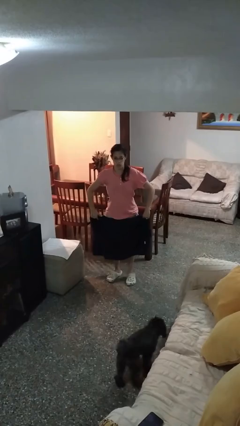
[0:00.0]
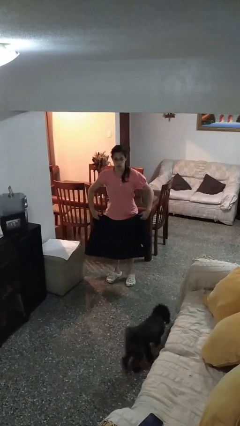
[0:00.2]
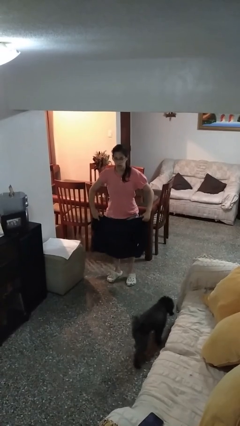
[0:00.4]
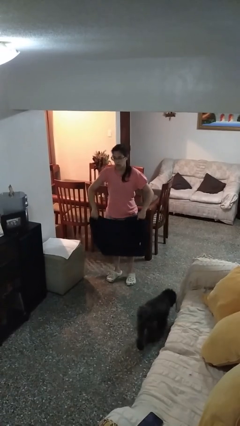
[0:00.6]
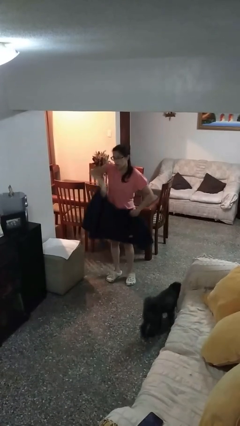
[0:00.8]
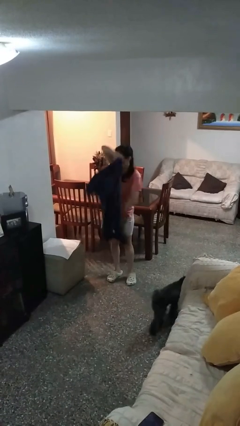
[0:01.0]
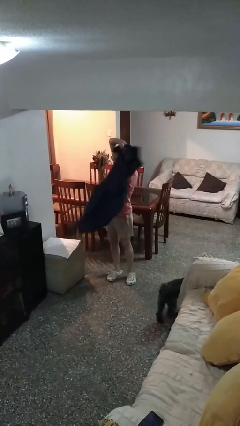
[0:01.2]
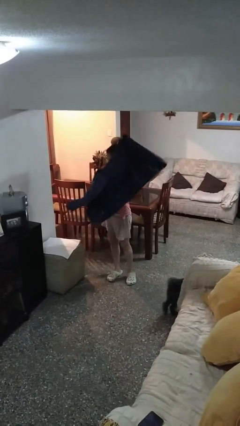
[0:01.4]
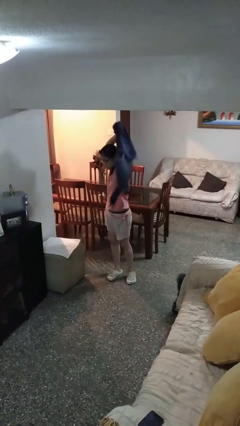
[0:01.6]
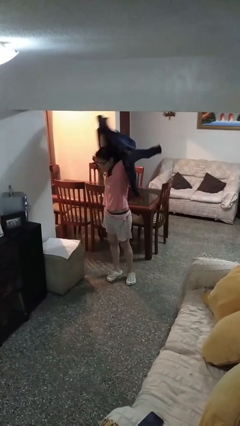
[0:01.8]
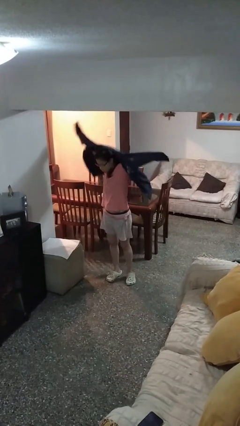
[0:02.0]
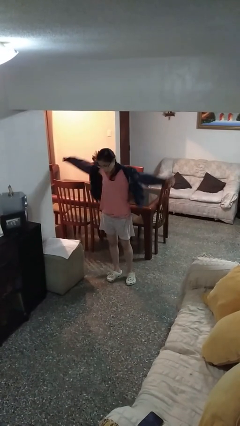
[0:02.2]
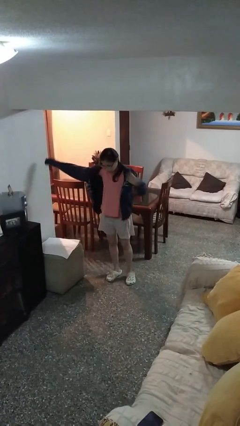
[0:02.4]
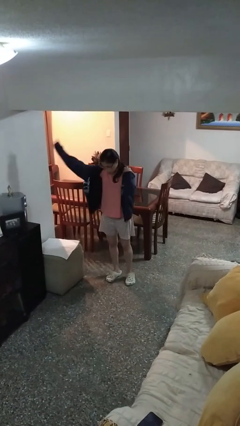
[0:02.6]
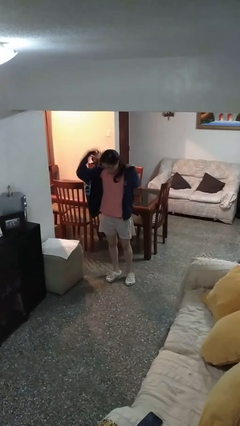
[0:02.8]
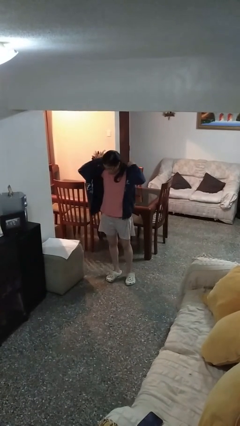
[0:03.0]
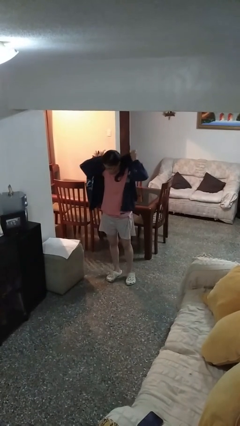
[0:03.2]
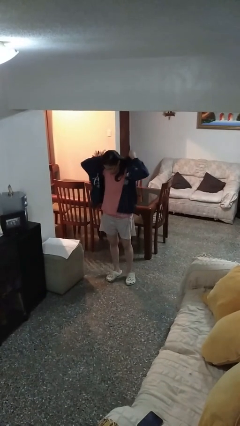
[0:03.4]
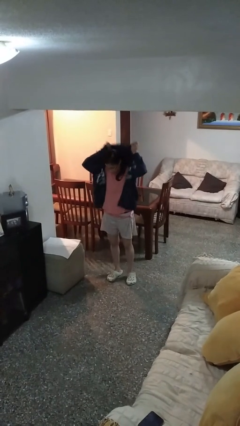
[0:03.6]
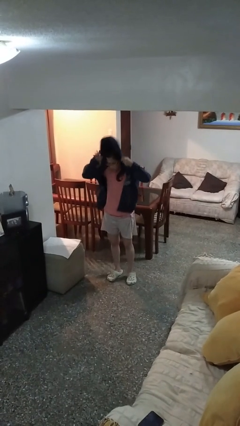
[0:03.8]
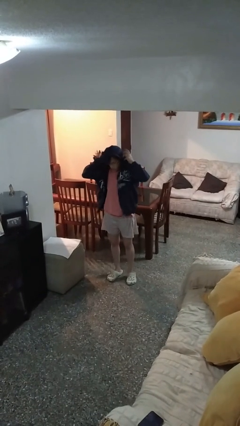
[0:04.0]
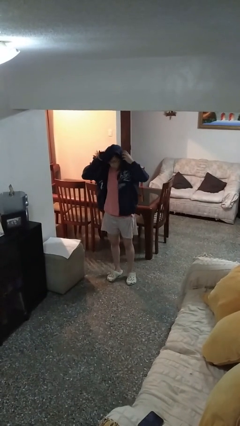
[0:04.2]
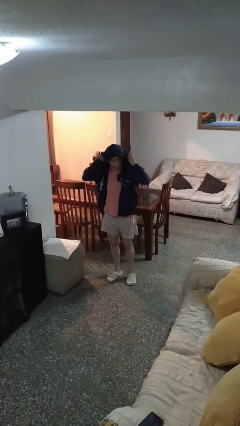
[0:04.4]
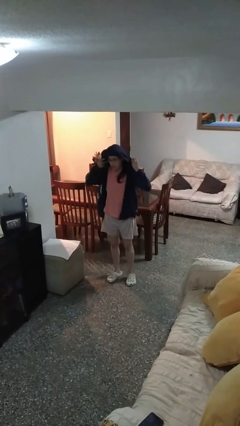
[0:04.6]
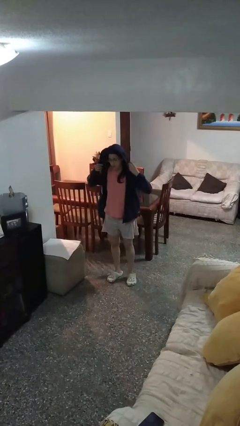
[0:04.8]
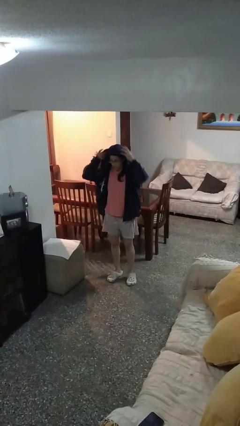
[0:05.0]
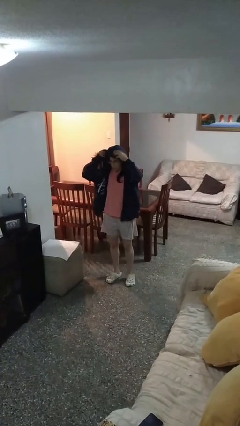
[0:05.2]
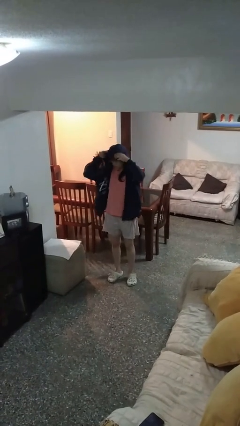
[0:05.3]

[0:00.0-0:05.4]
person puts on hoodie

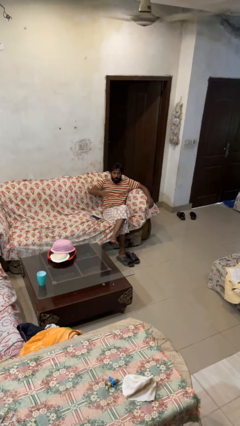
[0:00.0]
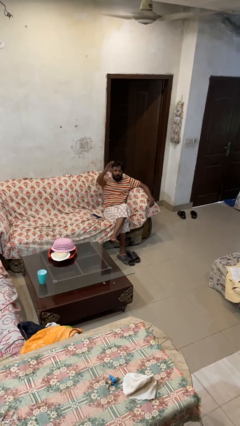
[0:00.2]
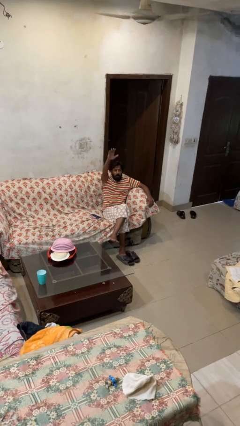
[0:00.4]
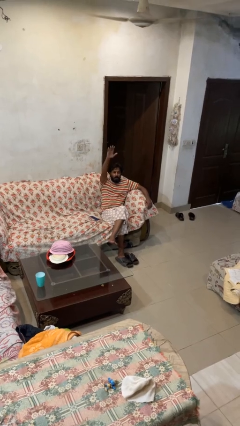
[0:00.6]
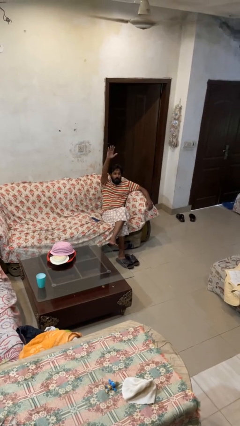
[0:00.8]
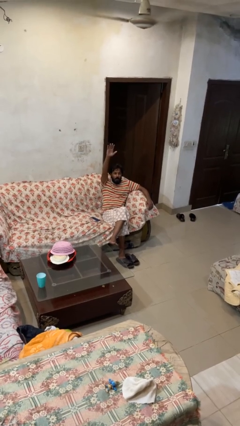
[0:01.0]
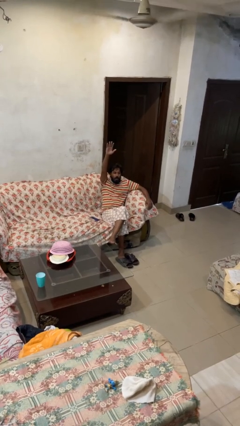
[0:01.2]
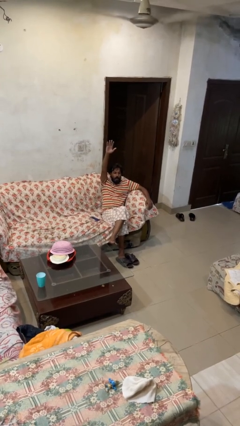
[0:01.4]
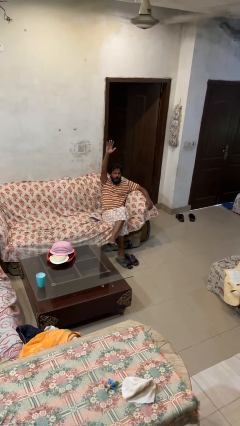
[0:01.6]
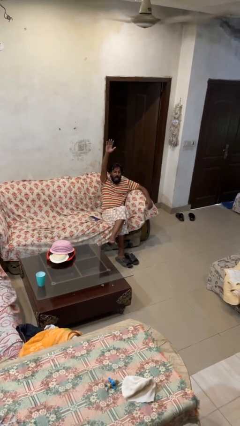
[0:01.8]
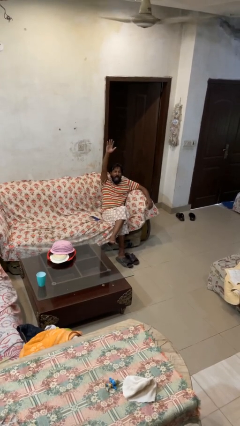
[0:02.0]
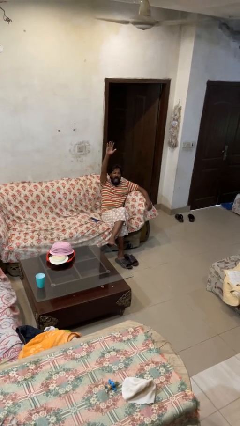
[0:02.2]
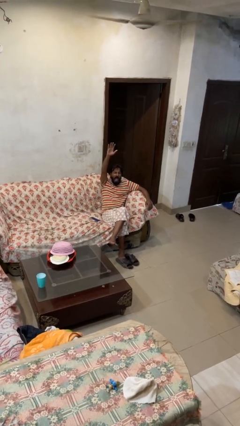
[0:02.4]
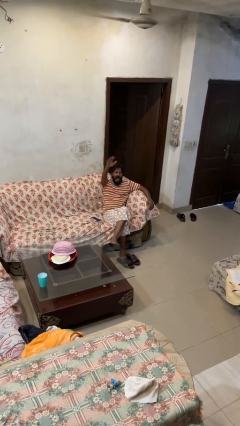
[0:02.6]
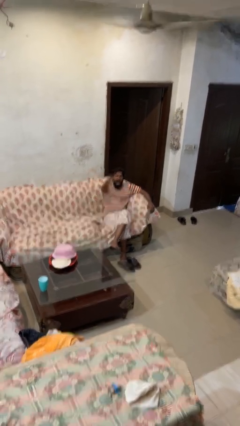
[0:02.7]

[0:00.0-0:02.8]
person gestures raise hand

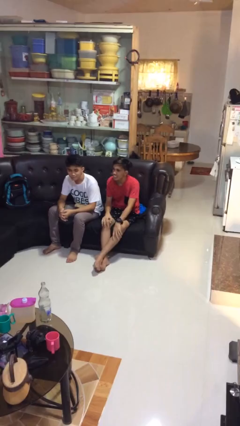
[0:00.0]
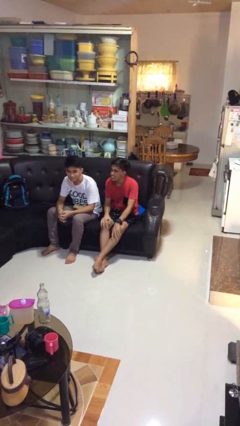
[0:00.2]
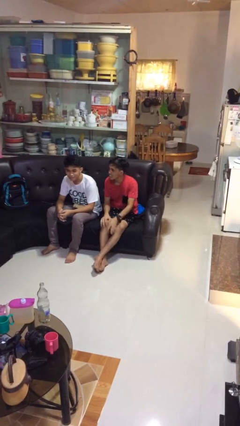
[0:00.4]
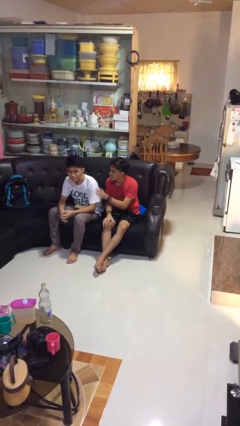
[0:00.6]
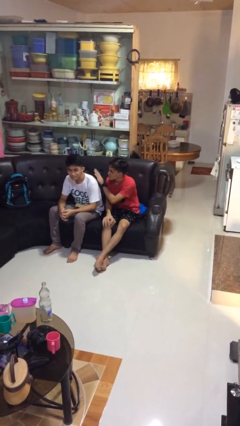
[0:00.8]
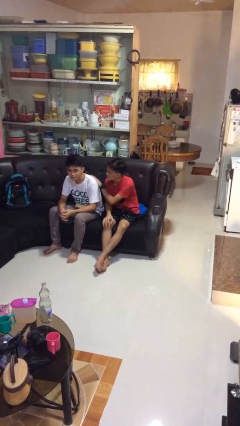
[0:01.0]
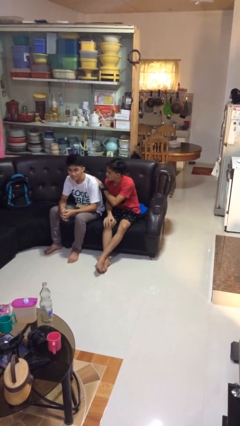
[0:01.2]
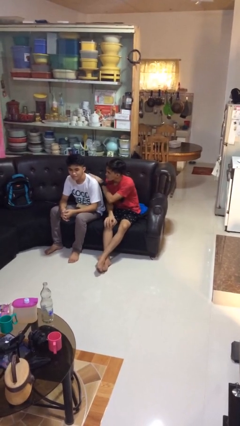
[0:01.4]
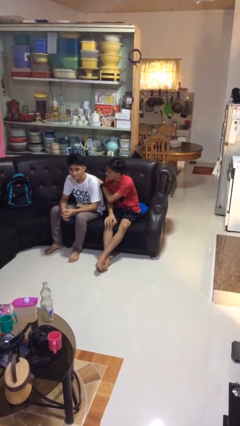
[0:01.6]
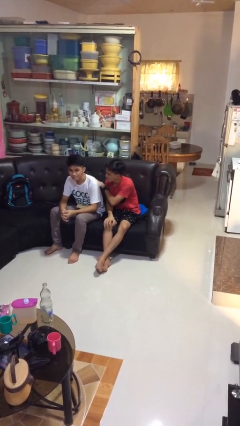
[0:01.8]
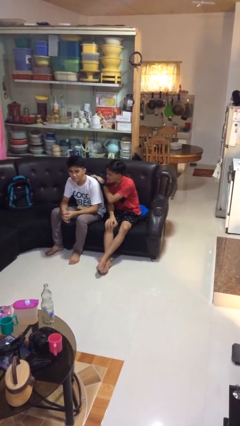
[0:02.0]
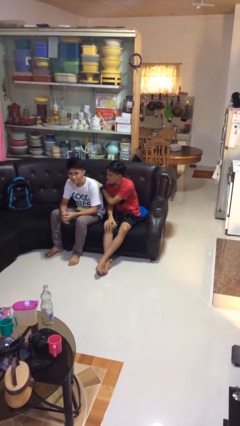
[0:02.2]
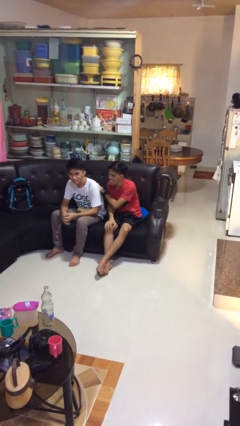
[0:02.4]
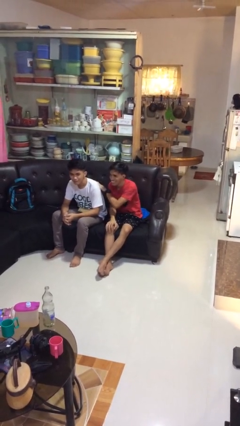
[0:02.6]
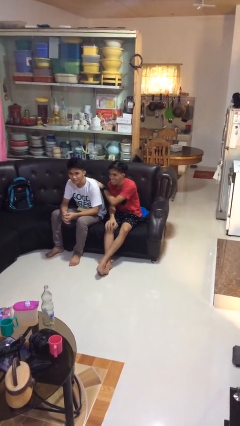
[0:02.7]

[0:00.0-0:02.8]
person touches back of person

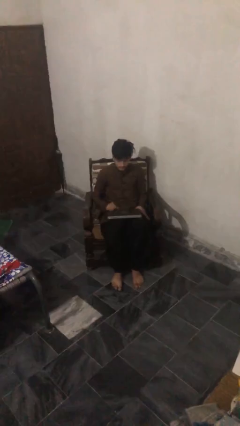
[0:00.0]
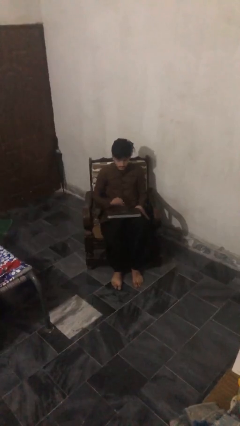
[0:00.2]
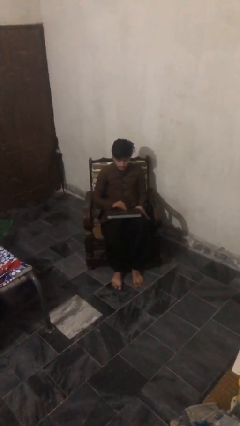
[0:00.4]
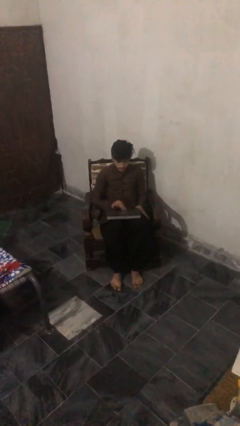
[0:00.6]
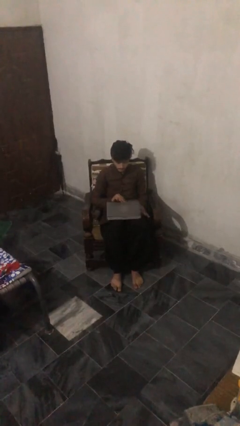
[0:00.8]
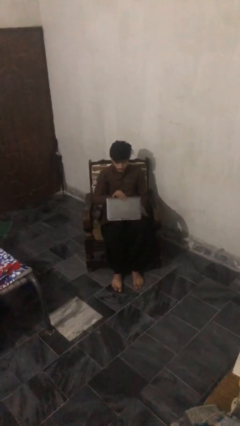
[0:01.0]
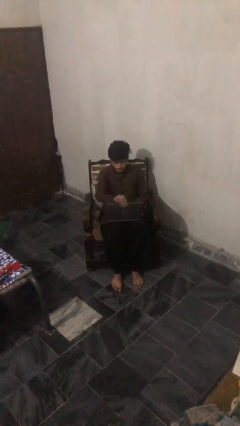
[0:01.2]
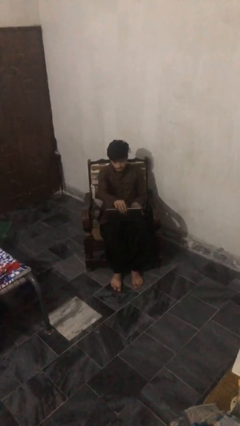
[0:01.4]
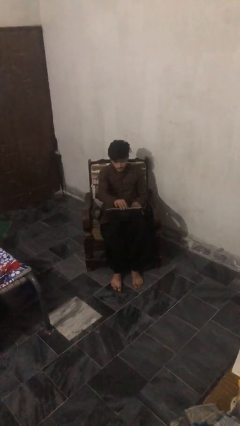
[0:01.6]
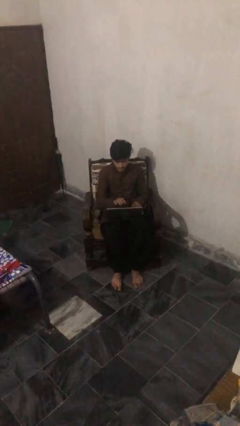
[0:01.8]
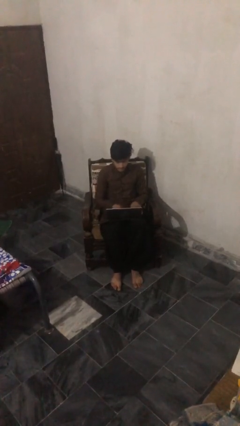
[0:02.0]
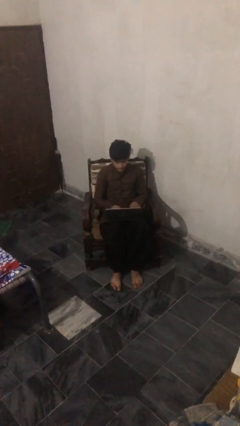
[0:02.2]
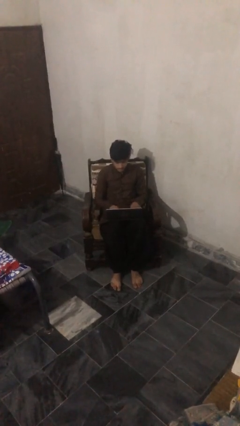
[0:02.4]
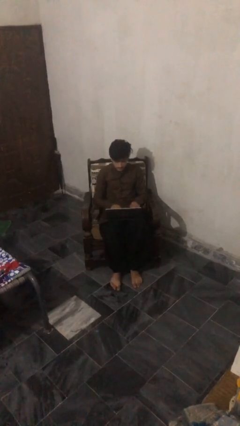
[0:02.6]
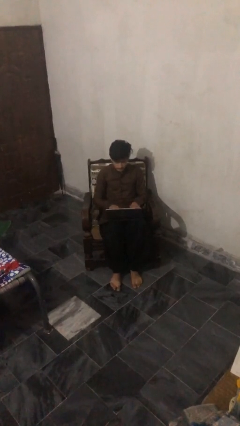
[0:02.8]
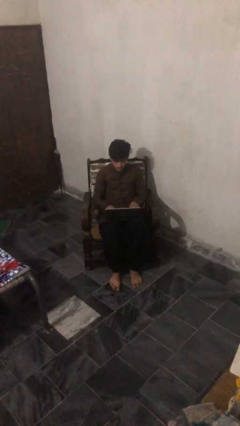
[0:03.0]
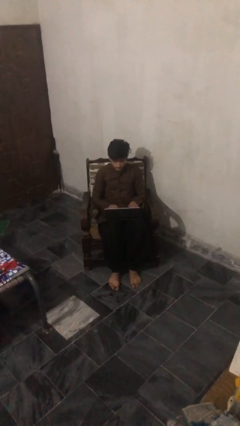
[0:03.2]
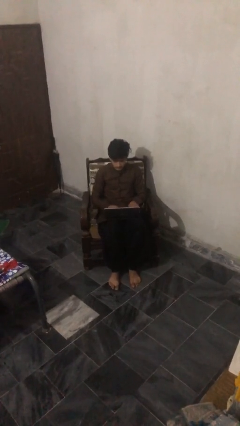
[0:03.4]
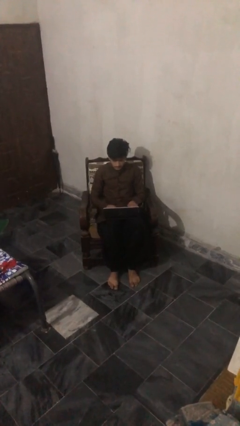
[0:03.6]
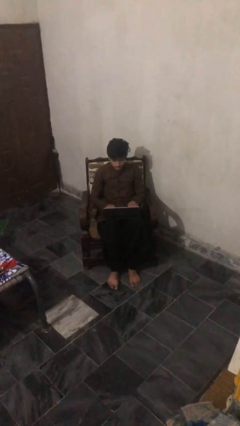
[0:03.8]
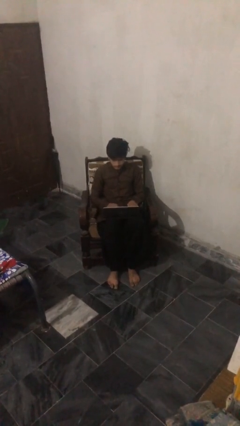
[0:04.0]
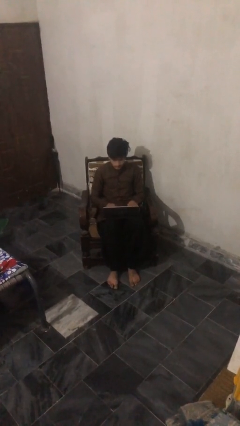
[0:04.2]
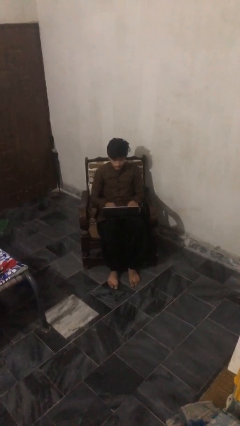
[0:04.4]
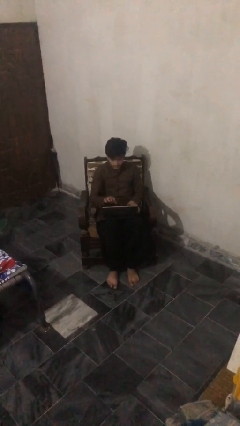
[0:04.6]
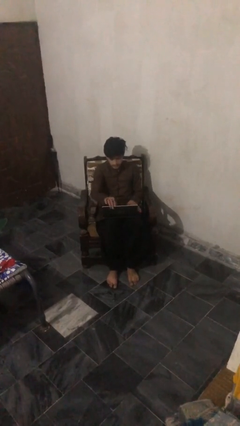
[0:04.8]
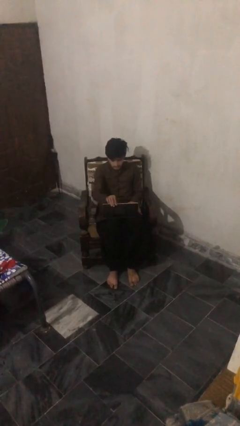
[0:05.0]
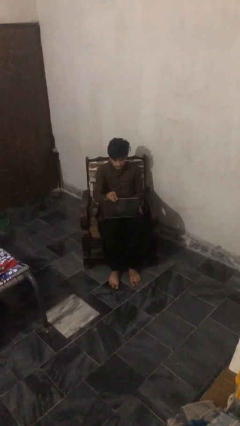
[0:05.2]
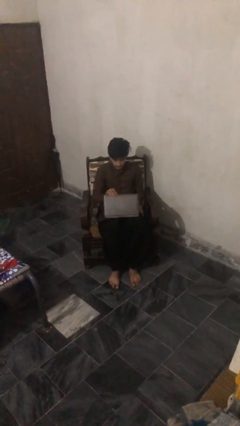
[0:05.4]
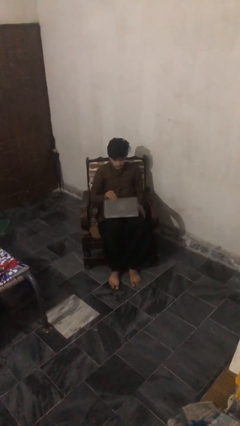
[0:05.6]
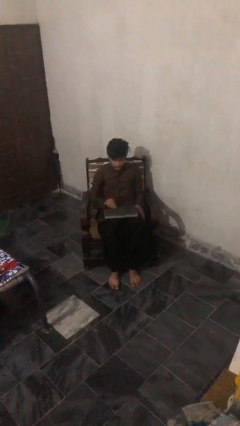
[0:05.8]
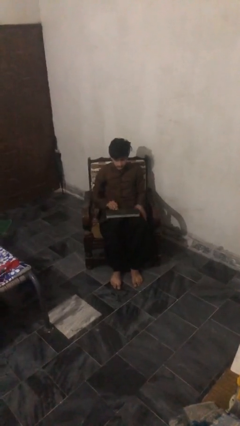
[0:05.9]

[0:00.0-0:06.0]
person interacts with laptop

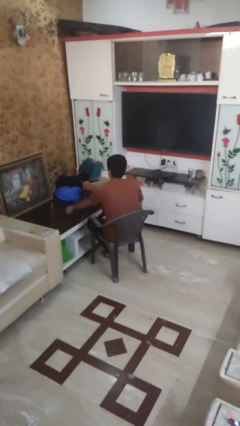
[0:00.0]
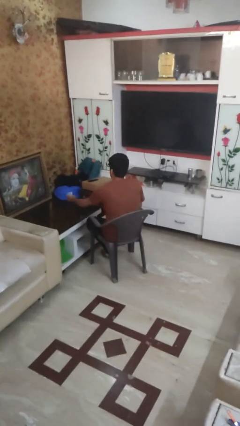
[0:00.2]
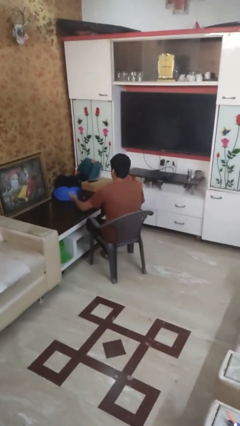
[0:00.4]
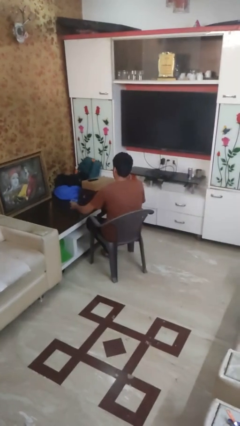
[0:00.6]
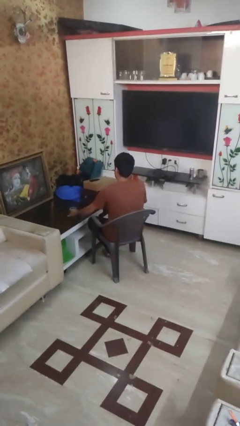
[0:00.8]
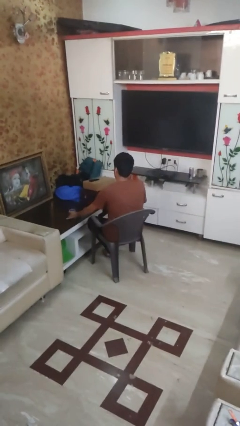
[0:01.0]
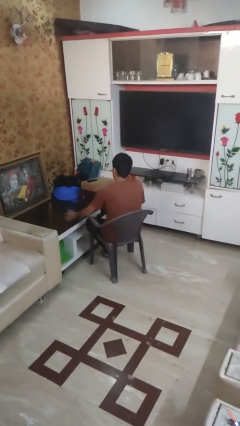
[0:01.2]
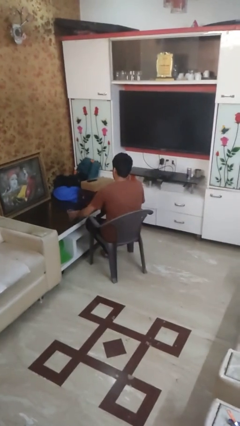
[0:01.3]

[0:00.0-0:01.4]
person sets upright glass
